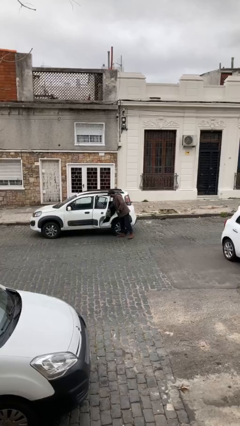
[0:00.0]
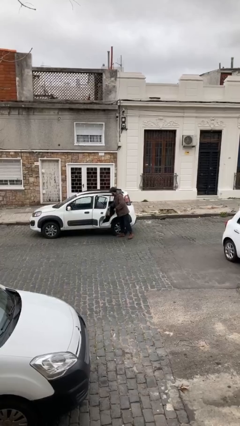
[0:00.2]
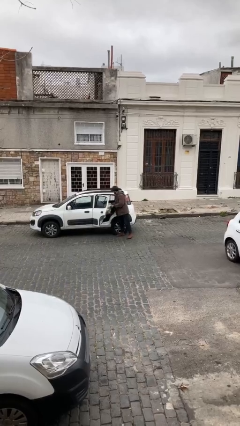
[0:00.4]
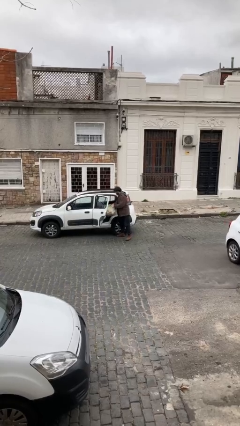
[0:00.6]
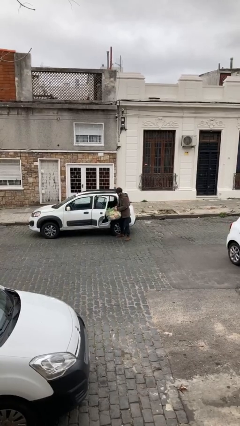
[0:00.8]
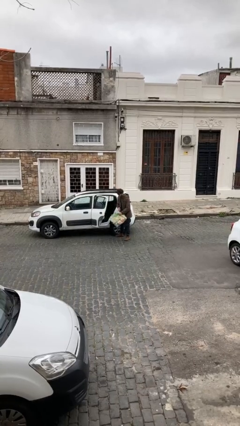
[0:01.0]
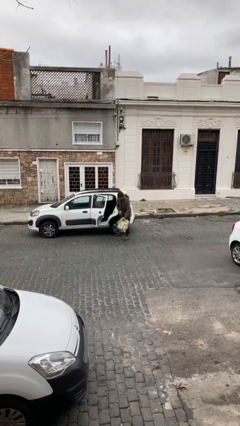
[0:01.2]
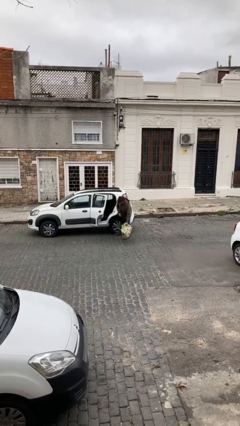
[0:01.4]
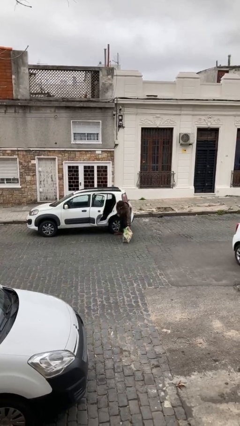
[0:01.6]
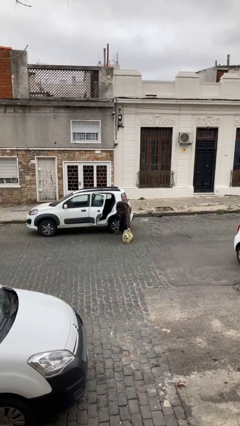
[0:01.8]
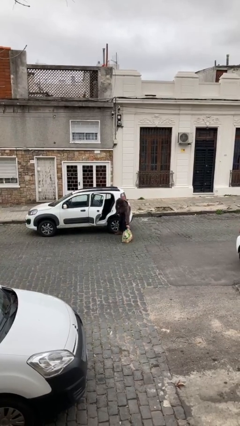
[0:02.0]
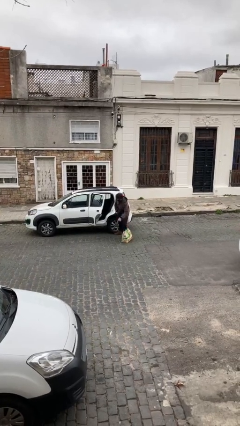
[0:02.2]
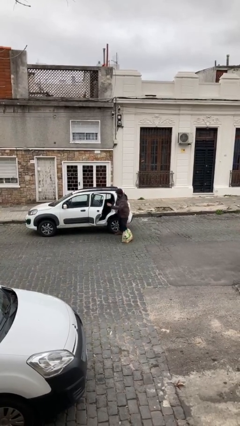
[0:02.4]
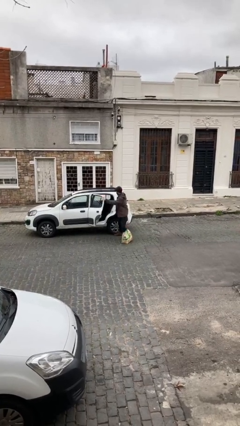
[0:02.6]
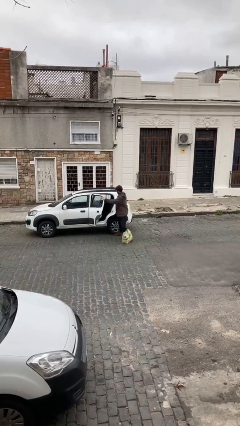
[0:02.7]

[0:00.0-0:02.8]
person unloads car

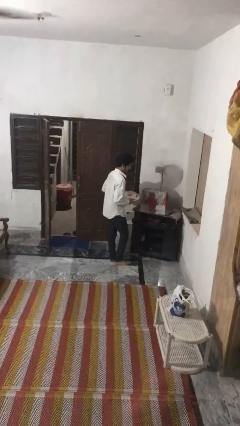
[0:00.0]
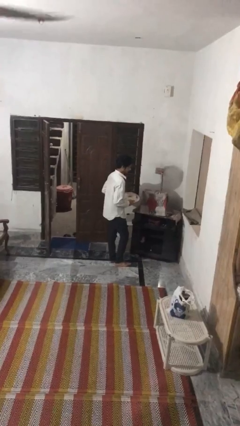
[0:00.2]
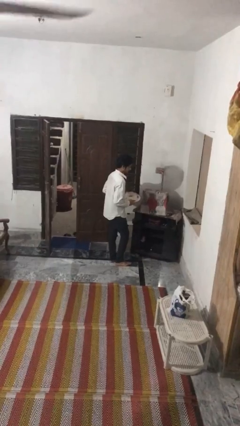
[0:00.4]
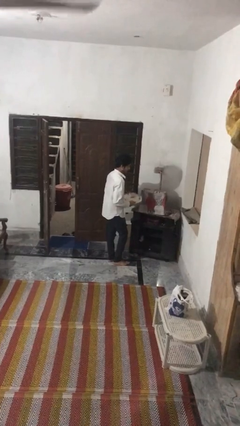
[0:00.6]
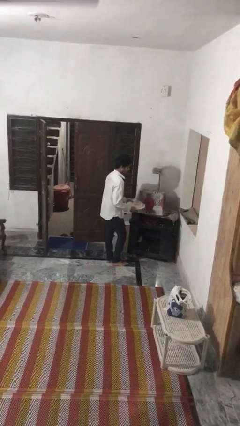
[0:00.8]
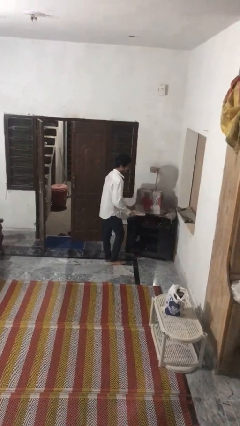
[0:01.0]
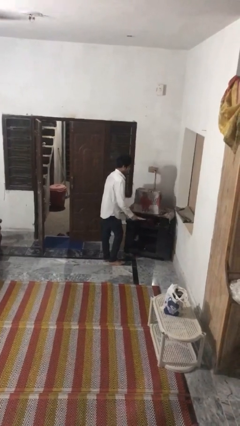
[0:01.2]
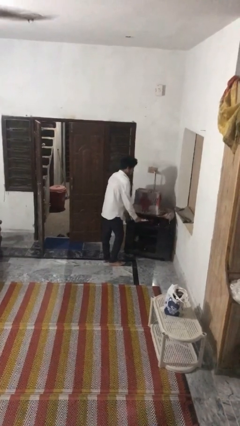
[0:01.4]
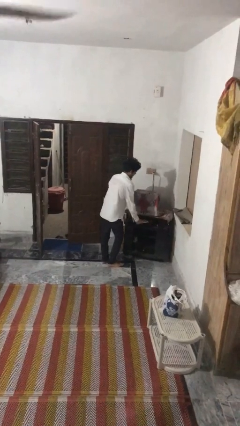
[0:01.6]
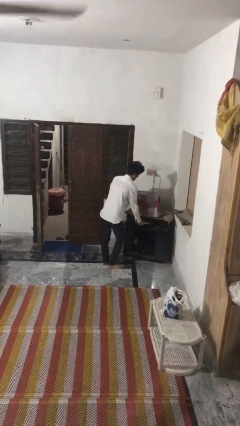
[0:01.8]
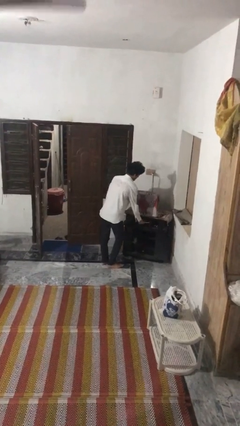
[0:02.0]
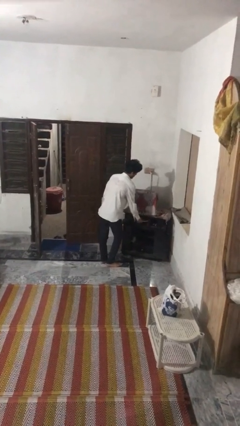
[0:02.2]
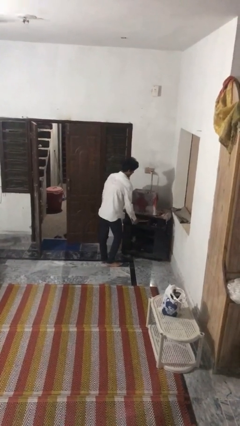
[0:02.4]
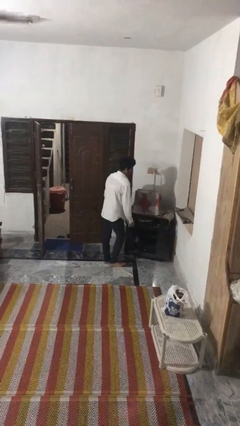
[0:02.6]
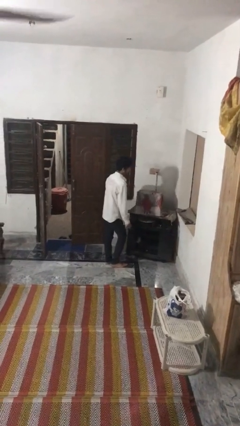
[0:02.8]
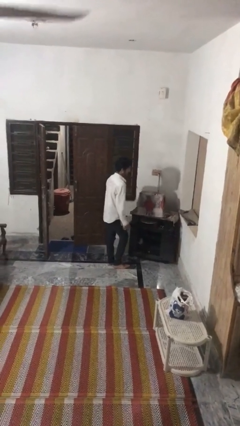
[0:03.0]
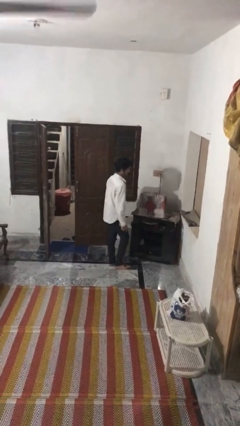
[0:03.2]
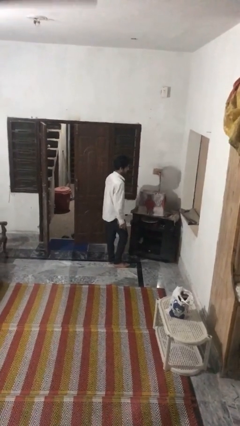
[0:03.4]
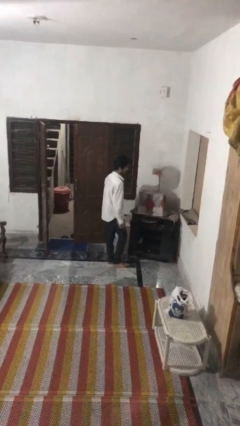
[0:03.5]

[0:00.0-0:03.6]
person puts down object into cabinet

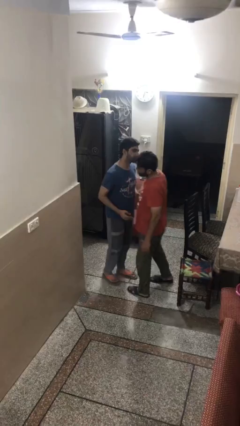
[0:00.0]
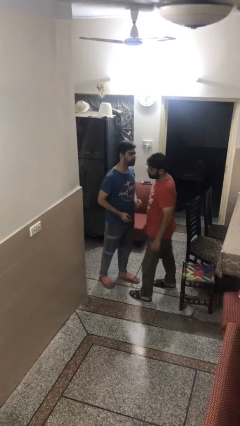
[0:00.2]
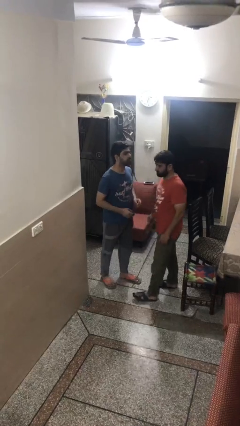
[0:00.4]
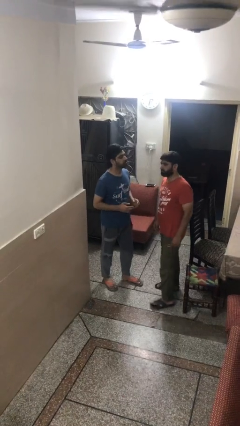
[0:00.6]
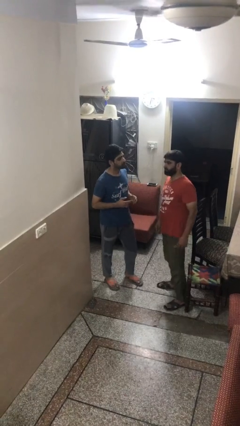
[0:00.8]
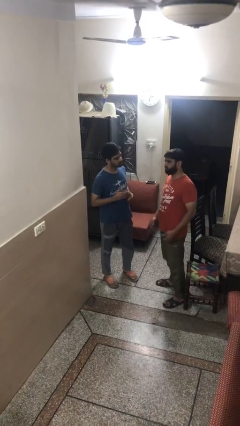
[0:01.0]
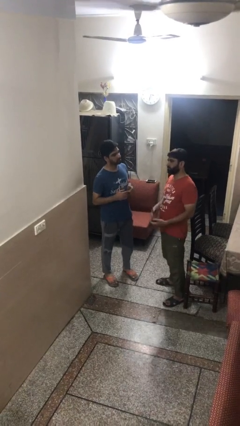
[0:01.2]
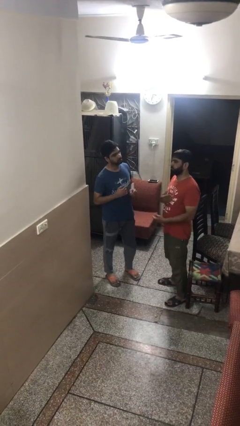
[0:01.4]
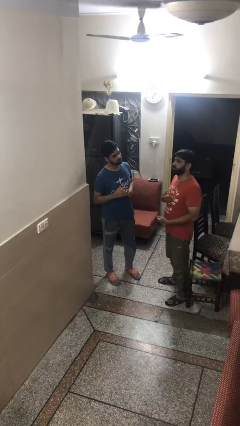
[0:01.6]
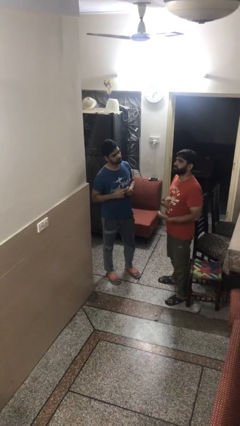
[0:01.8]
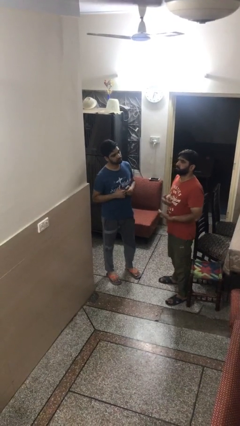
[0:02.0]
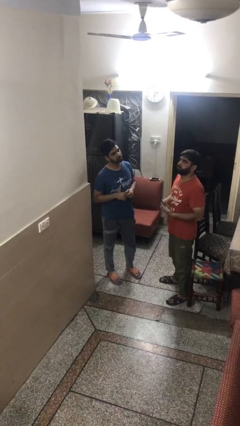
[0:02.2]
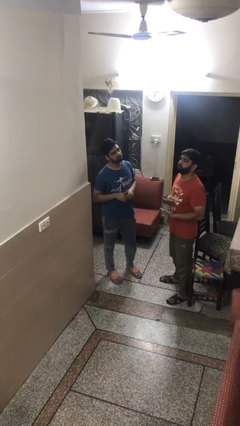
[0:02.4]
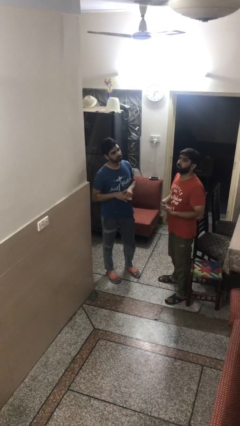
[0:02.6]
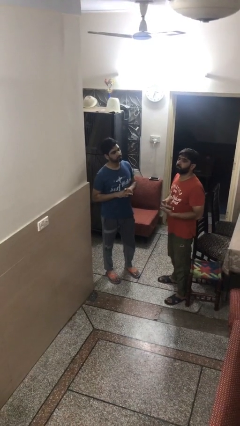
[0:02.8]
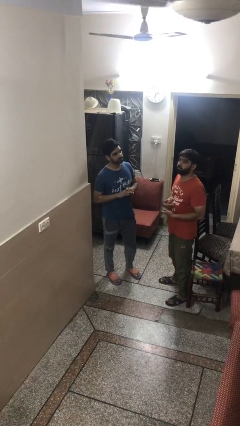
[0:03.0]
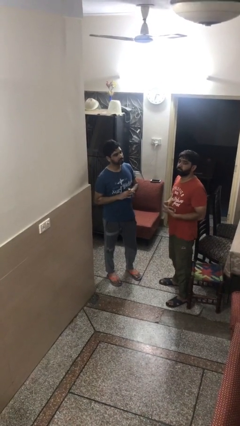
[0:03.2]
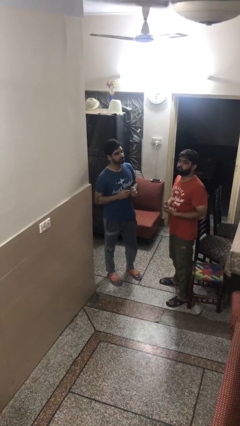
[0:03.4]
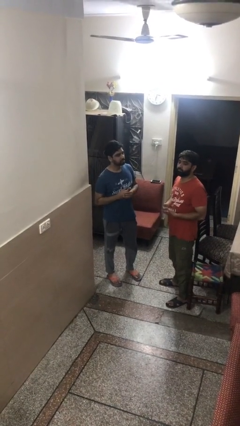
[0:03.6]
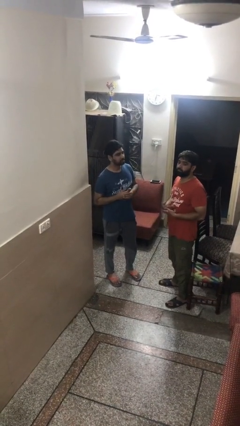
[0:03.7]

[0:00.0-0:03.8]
person talks to person

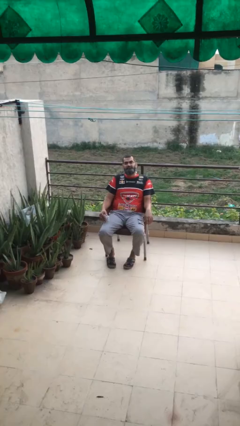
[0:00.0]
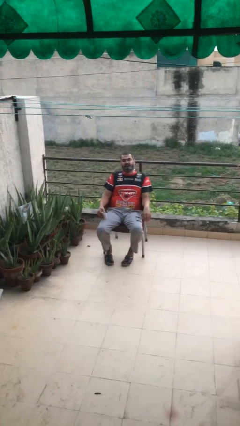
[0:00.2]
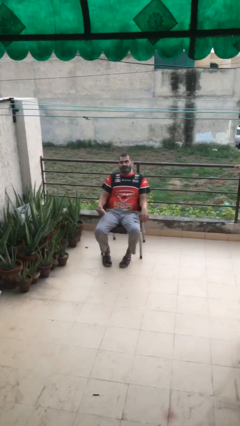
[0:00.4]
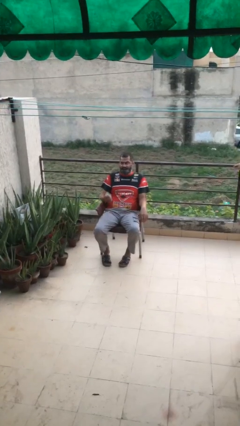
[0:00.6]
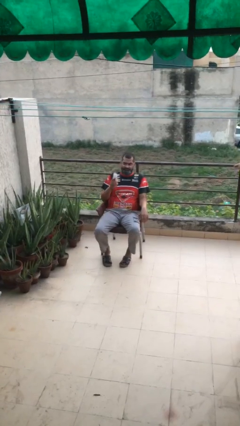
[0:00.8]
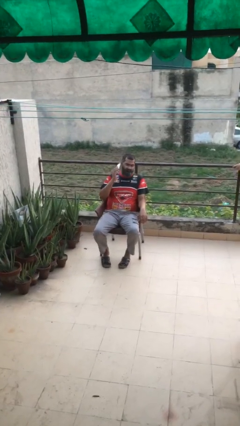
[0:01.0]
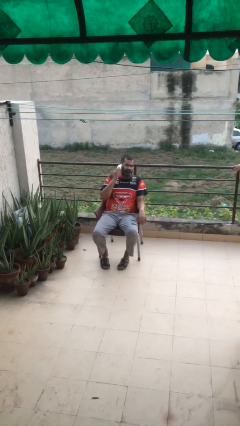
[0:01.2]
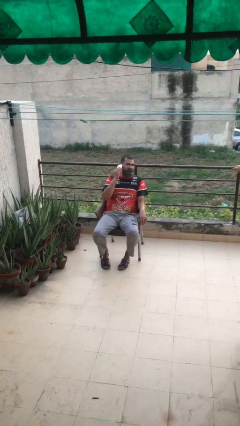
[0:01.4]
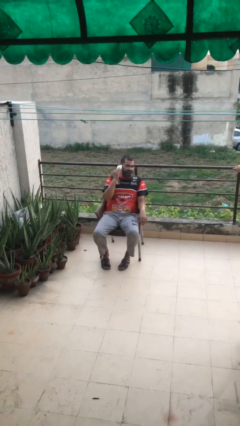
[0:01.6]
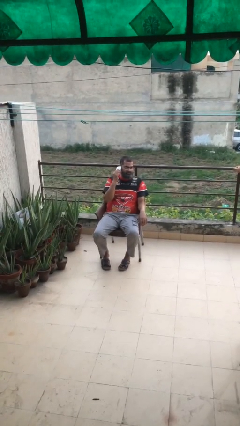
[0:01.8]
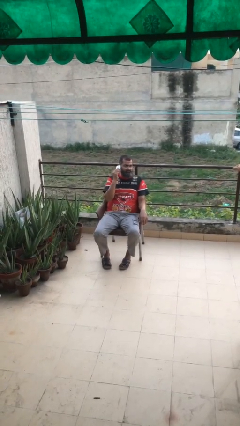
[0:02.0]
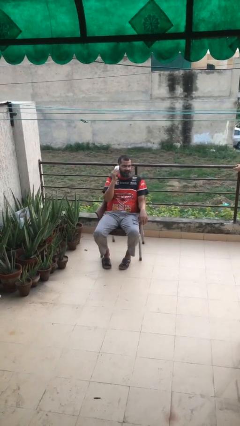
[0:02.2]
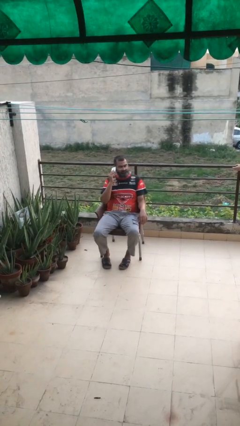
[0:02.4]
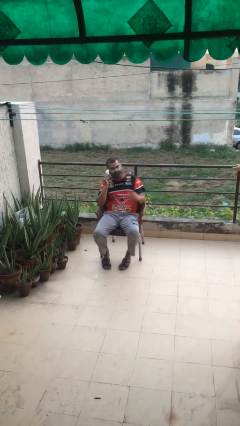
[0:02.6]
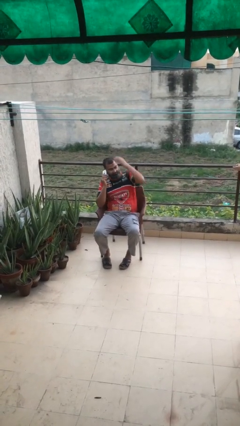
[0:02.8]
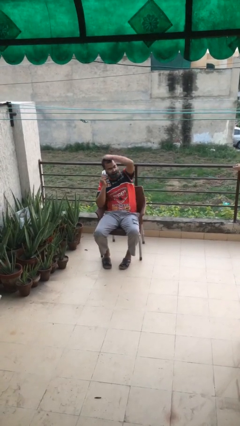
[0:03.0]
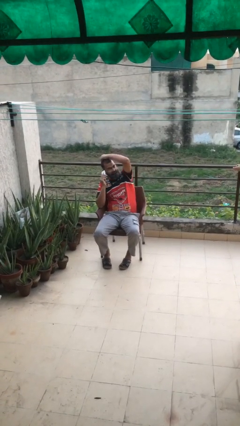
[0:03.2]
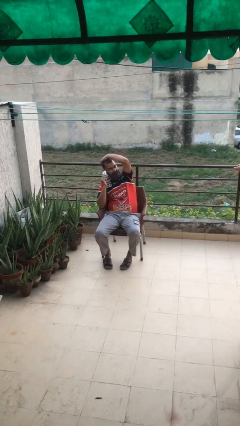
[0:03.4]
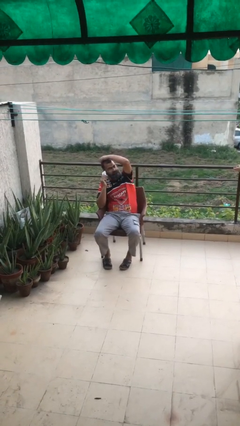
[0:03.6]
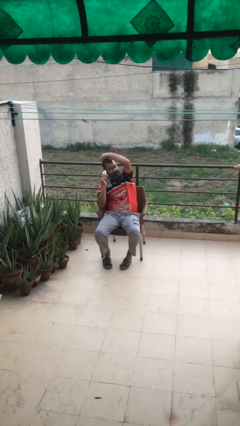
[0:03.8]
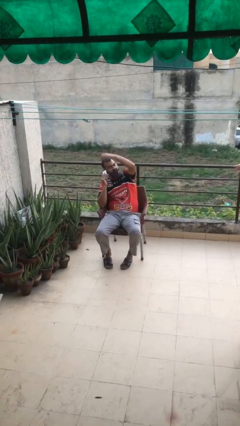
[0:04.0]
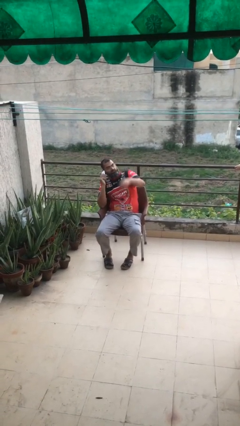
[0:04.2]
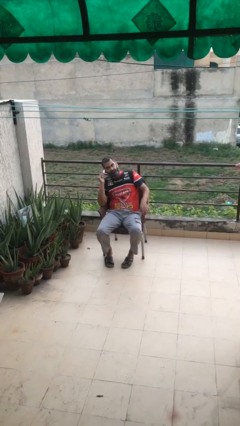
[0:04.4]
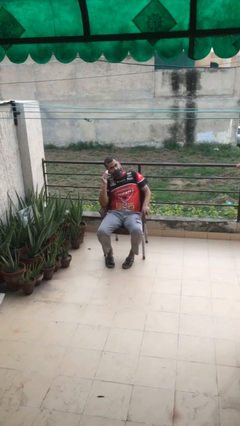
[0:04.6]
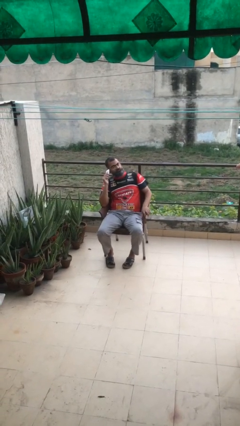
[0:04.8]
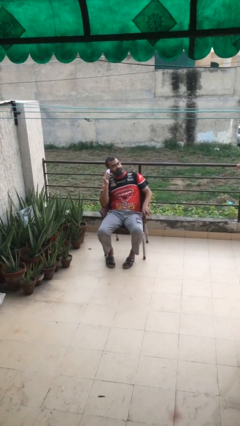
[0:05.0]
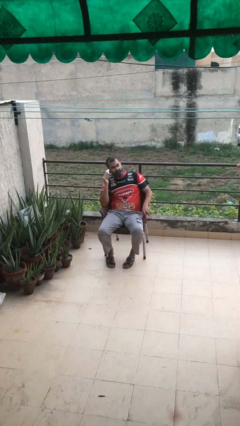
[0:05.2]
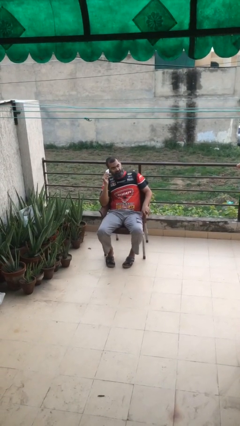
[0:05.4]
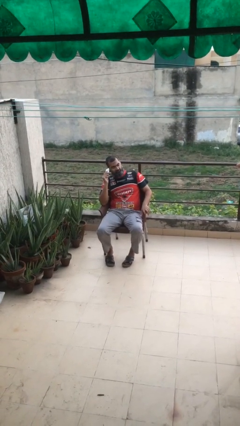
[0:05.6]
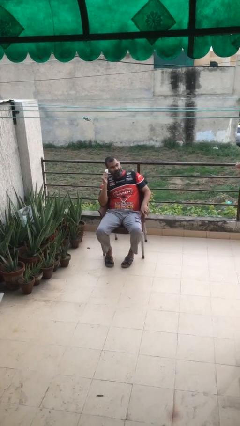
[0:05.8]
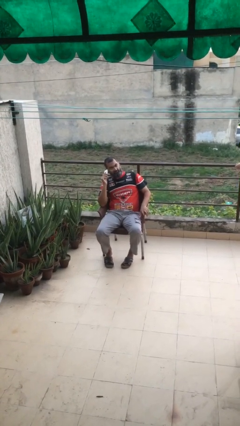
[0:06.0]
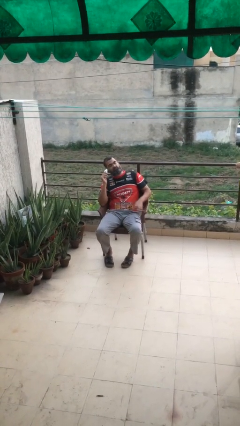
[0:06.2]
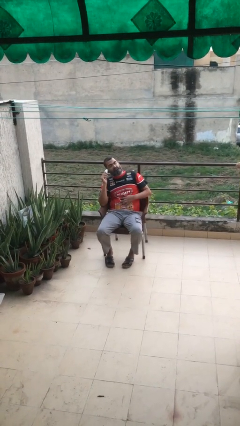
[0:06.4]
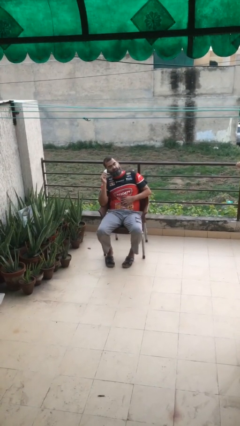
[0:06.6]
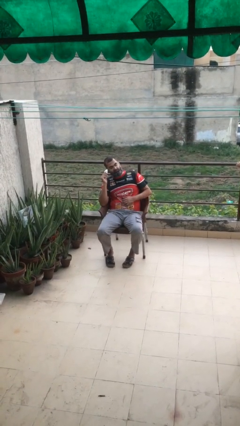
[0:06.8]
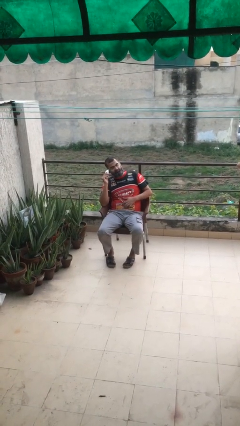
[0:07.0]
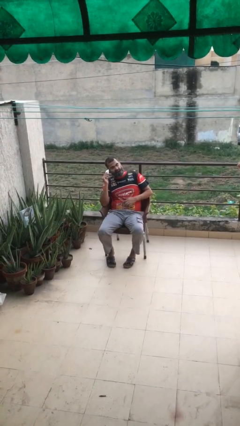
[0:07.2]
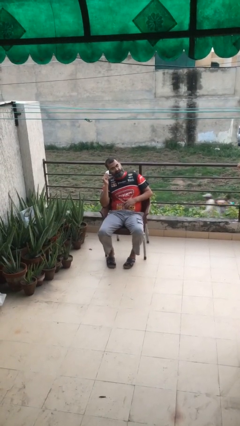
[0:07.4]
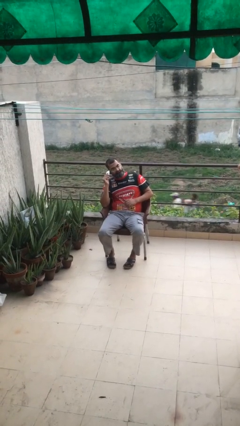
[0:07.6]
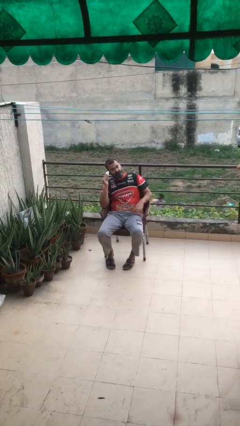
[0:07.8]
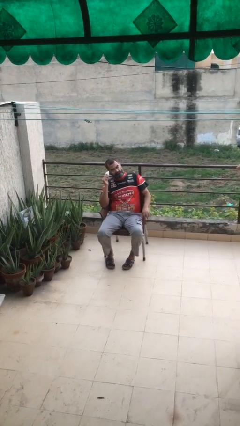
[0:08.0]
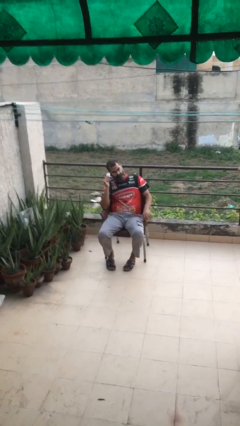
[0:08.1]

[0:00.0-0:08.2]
person talks on phone
